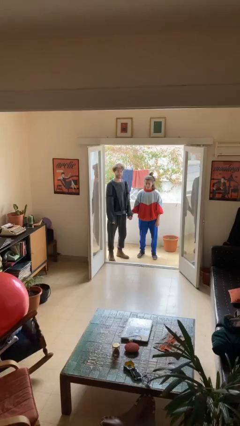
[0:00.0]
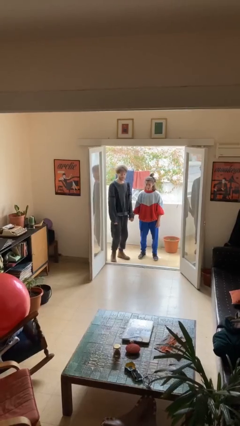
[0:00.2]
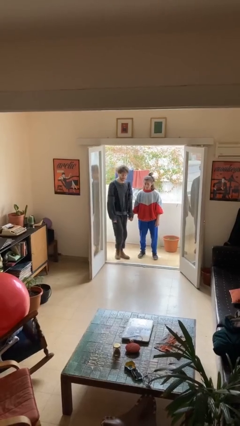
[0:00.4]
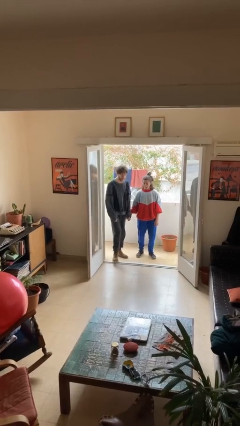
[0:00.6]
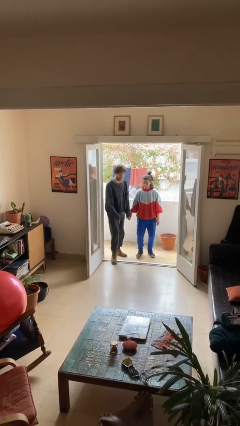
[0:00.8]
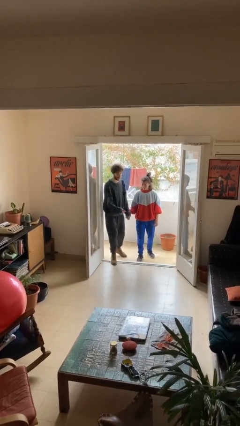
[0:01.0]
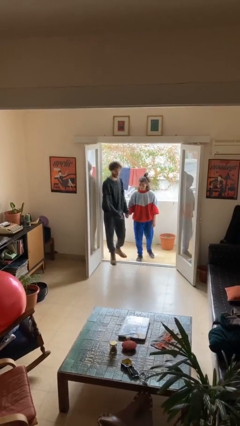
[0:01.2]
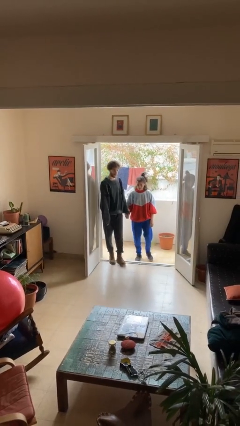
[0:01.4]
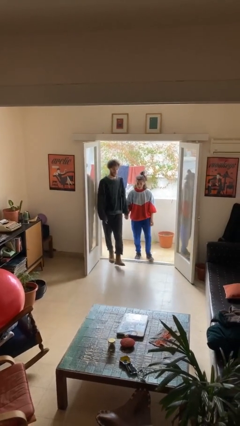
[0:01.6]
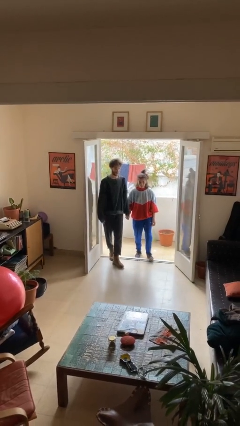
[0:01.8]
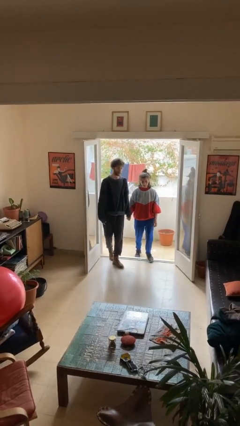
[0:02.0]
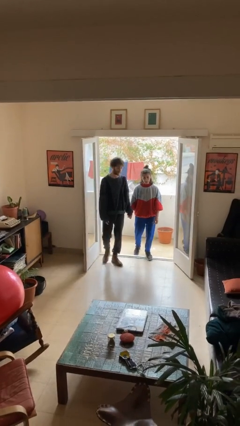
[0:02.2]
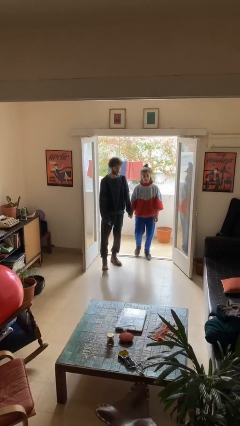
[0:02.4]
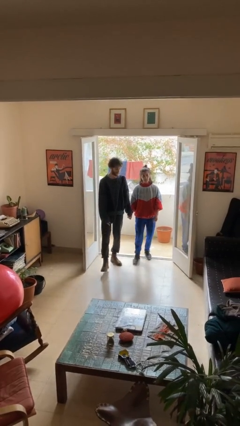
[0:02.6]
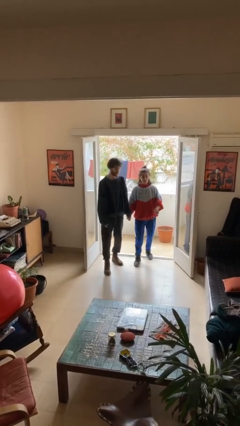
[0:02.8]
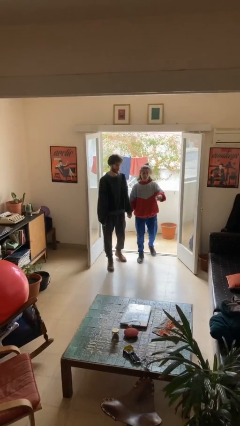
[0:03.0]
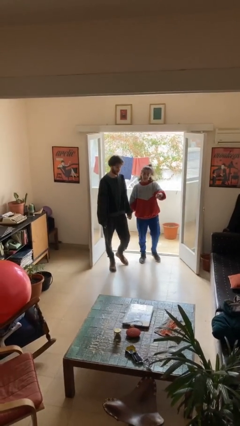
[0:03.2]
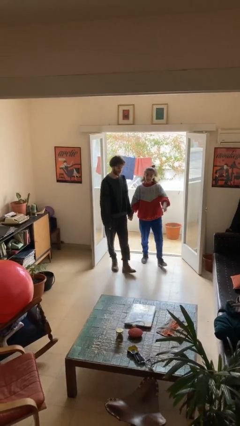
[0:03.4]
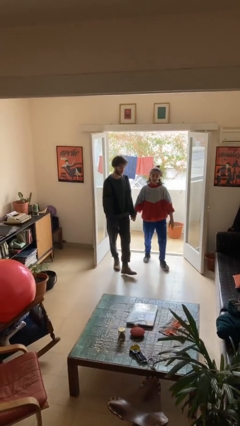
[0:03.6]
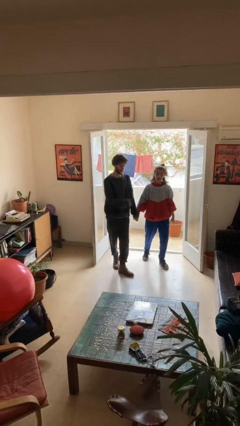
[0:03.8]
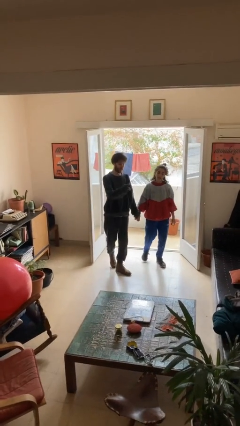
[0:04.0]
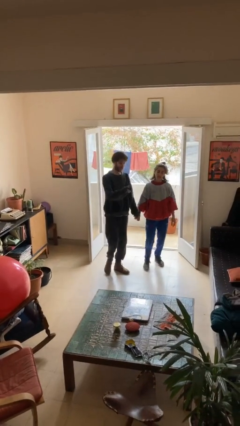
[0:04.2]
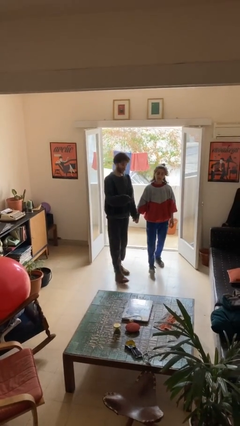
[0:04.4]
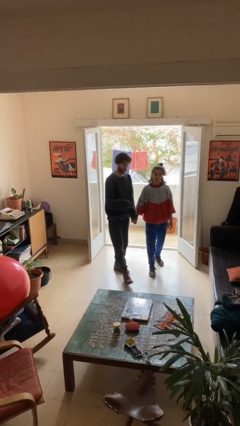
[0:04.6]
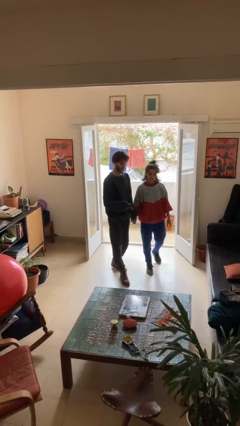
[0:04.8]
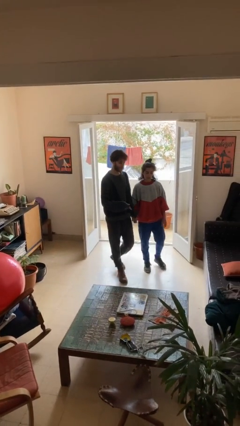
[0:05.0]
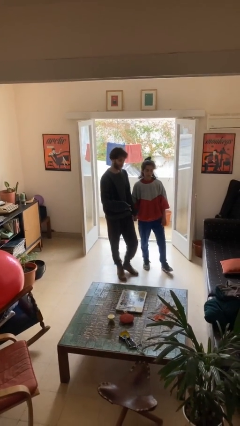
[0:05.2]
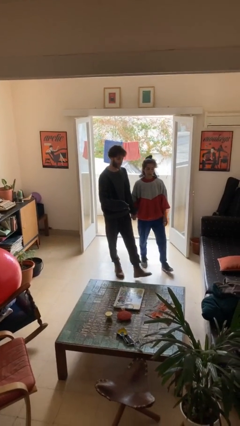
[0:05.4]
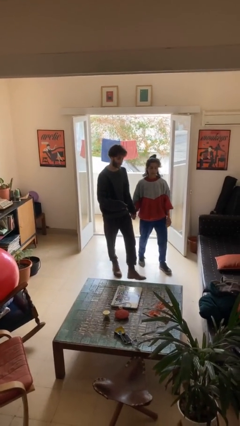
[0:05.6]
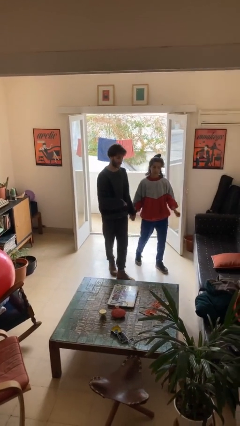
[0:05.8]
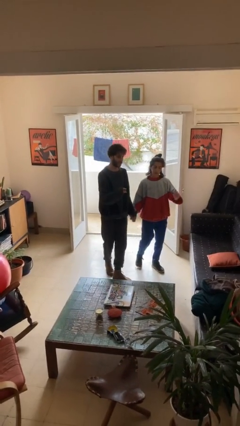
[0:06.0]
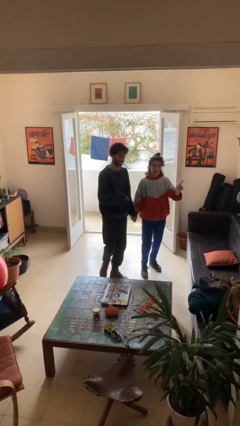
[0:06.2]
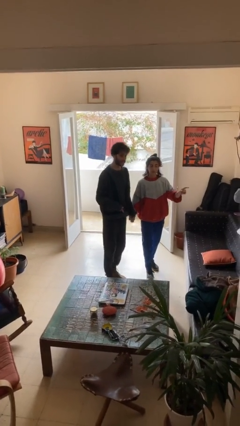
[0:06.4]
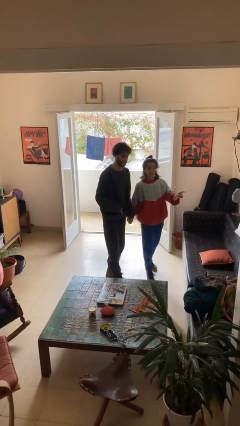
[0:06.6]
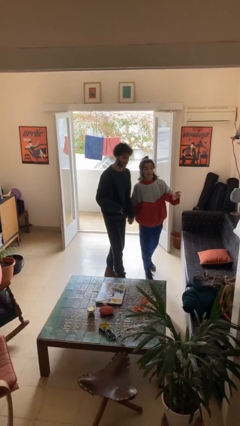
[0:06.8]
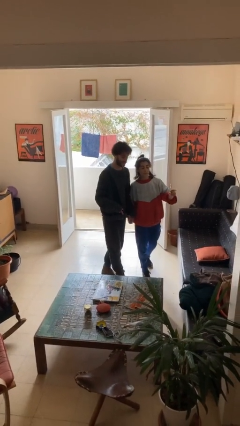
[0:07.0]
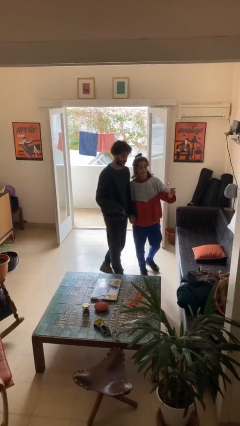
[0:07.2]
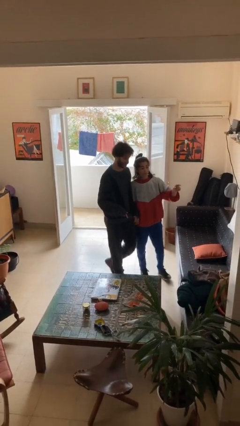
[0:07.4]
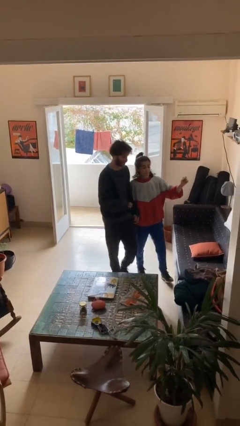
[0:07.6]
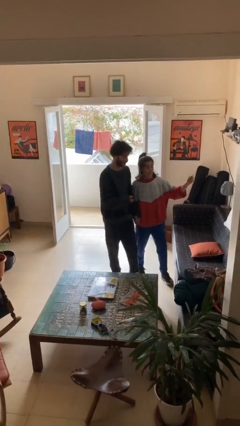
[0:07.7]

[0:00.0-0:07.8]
person holds hand

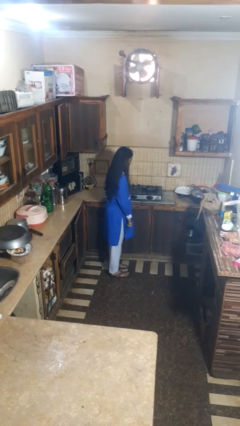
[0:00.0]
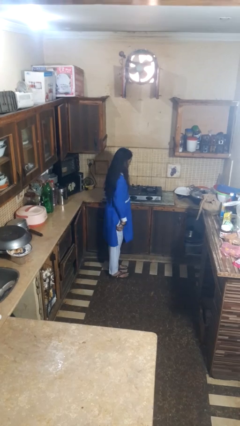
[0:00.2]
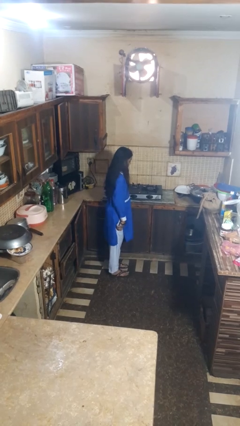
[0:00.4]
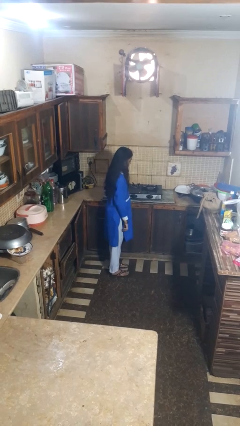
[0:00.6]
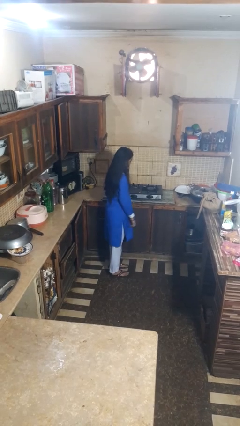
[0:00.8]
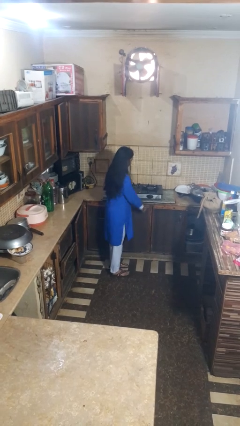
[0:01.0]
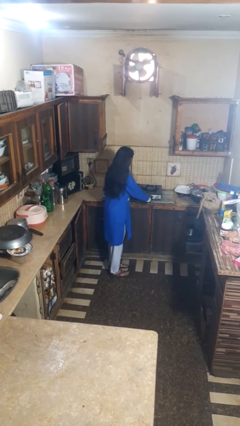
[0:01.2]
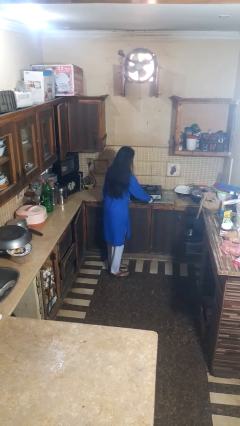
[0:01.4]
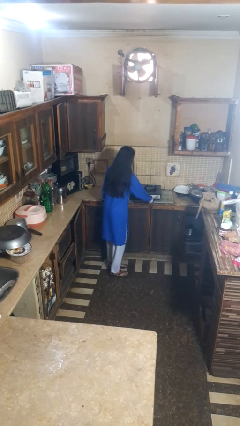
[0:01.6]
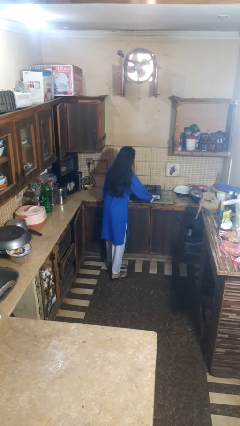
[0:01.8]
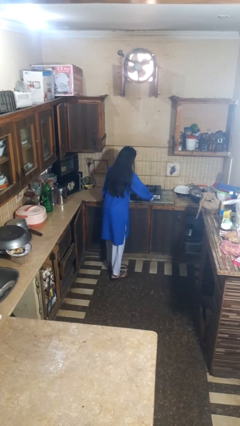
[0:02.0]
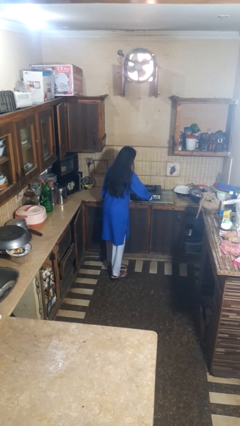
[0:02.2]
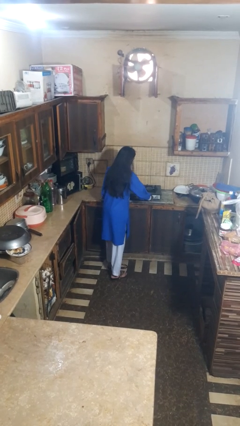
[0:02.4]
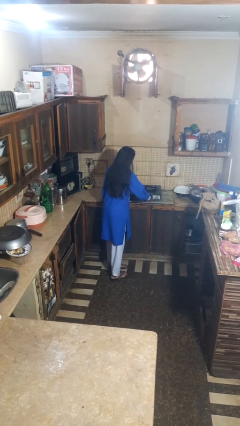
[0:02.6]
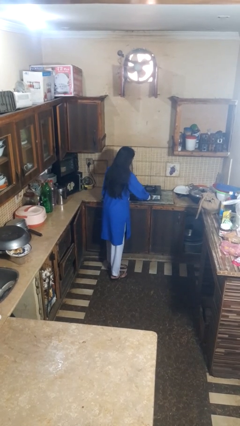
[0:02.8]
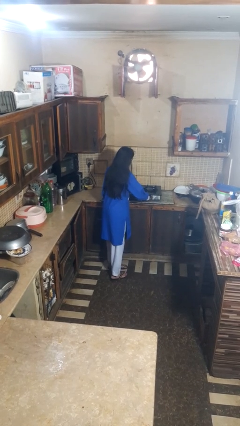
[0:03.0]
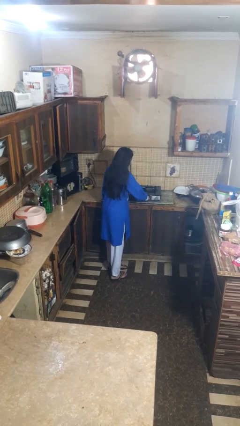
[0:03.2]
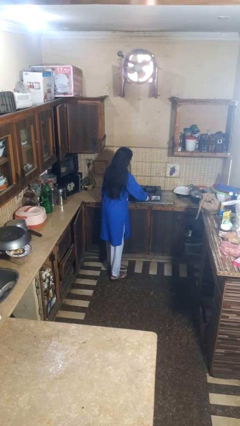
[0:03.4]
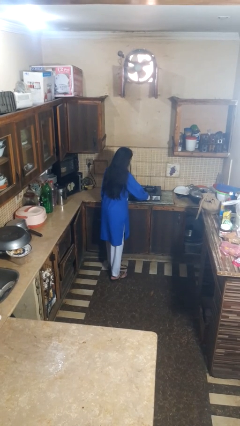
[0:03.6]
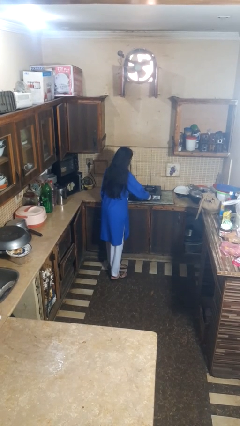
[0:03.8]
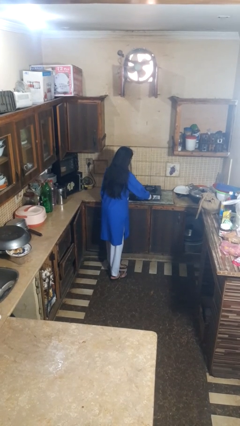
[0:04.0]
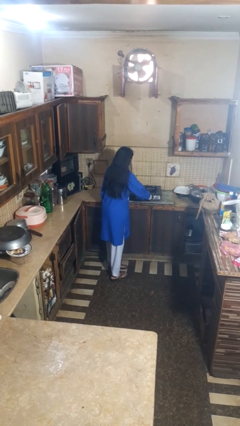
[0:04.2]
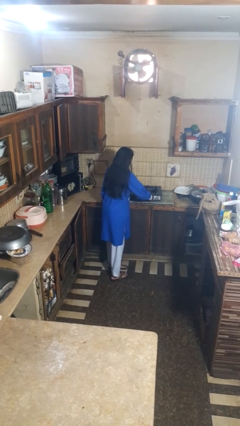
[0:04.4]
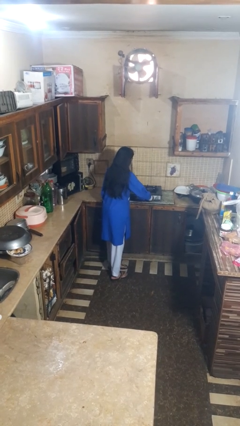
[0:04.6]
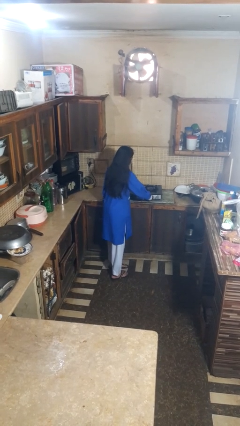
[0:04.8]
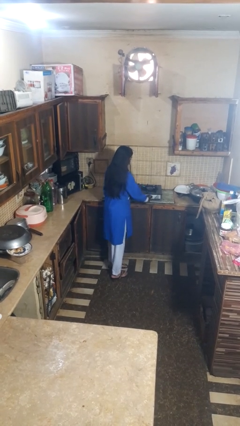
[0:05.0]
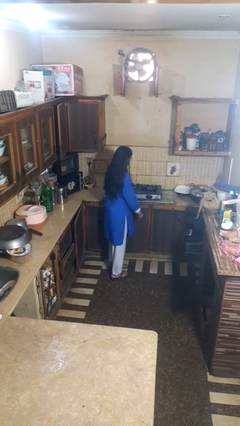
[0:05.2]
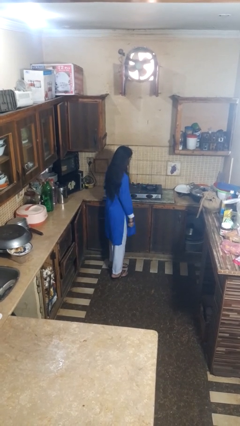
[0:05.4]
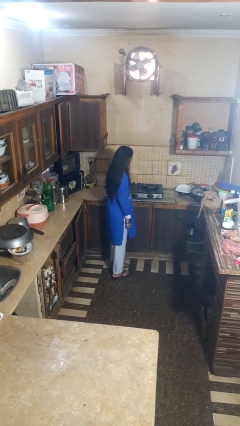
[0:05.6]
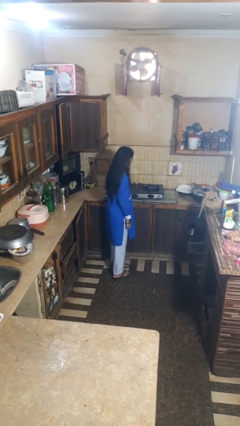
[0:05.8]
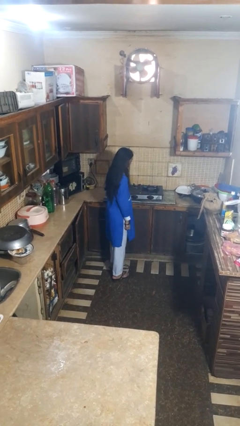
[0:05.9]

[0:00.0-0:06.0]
person turns on stovetop

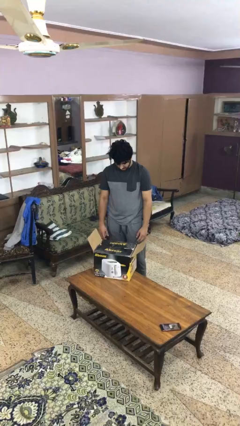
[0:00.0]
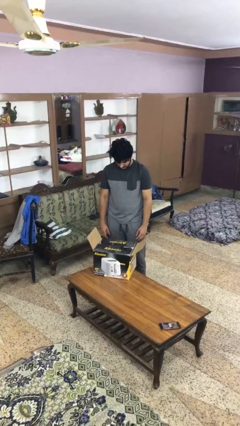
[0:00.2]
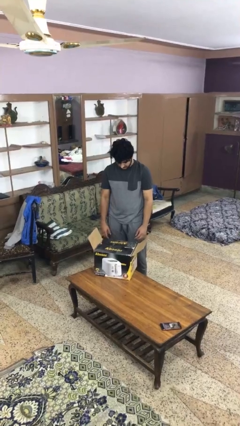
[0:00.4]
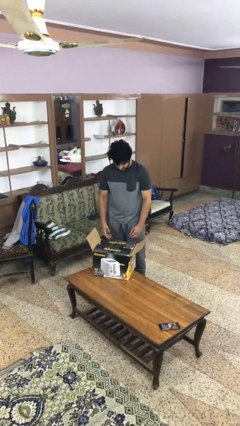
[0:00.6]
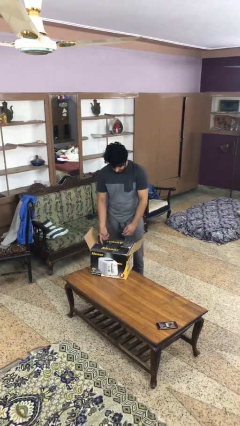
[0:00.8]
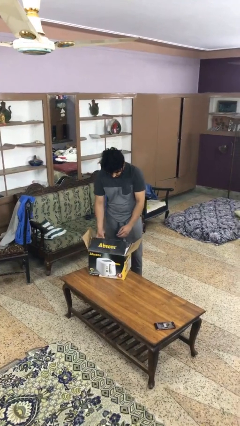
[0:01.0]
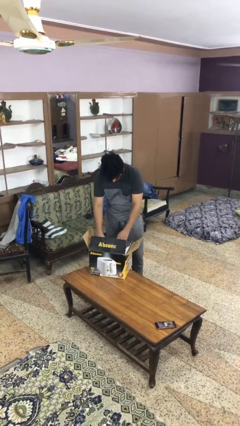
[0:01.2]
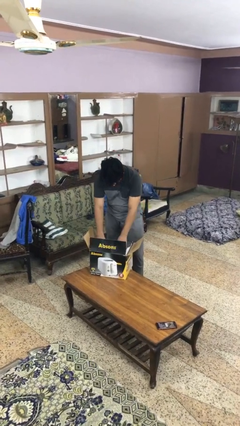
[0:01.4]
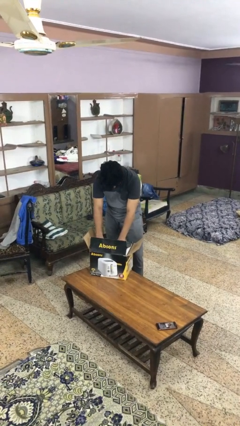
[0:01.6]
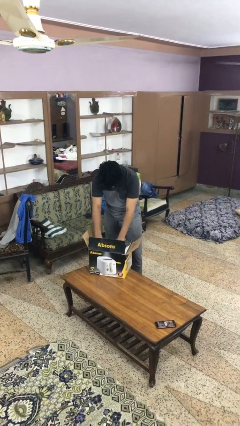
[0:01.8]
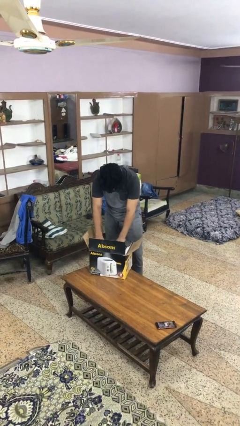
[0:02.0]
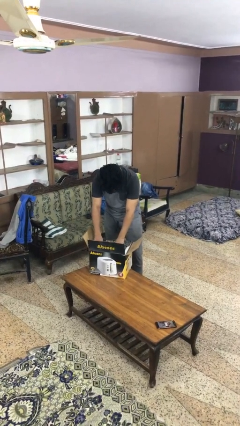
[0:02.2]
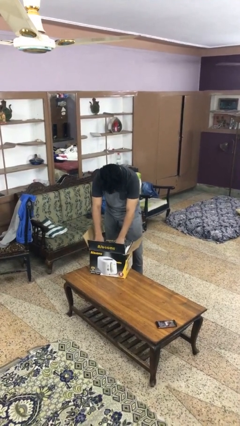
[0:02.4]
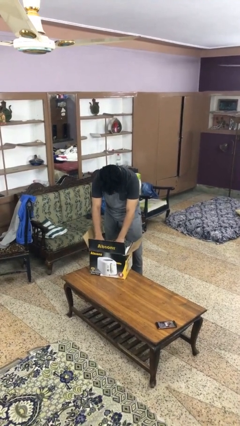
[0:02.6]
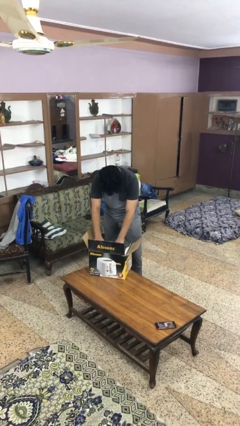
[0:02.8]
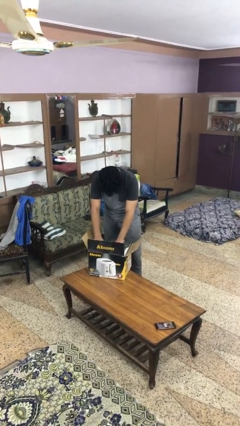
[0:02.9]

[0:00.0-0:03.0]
person searches in box

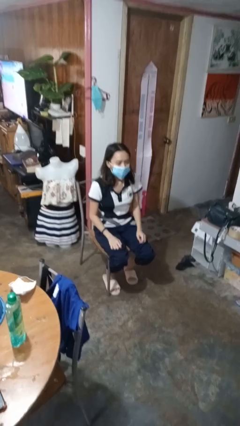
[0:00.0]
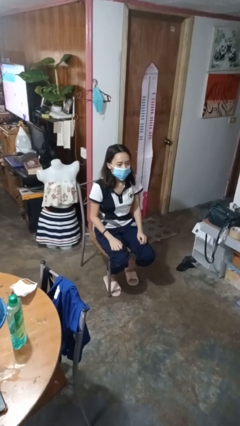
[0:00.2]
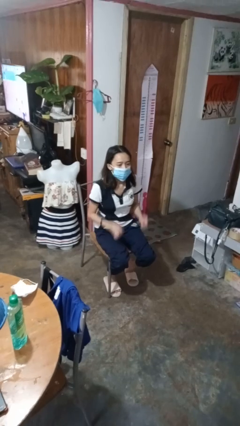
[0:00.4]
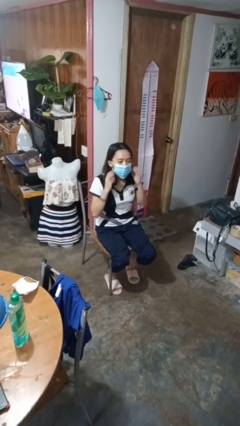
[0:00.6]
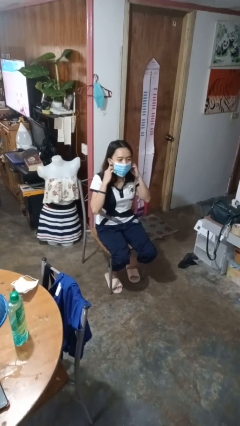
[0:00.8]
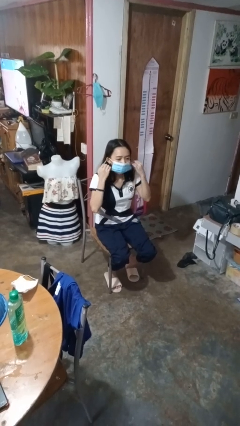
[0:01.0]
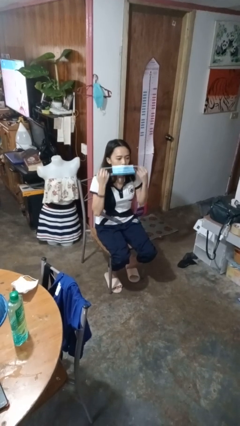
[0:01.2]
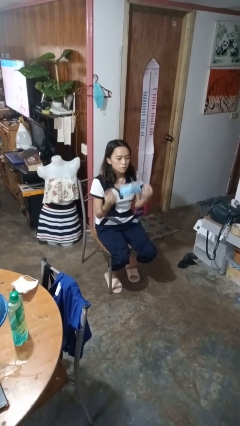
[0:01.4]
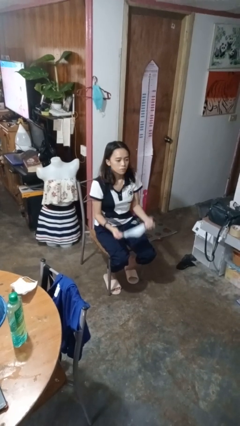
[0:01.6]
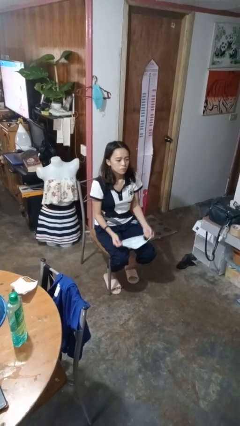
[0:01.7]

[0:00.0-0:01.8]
person takes off facemask
